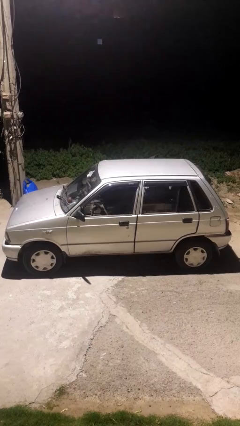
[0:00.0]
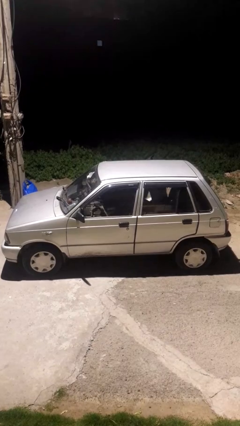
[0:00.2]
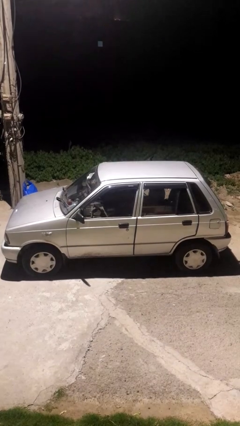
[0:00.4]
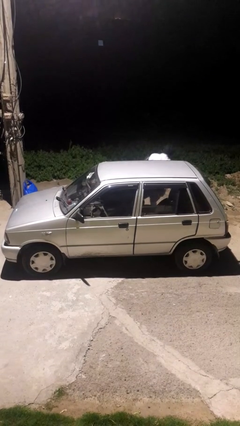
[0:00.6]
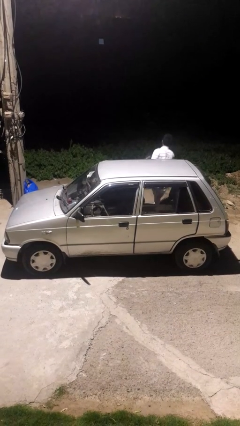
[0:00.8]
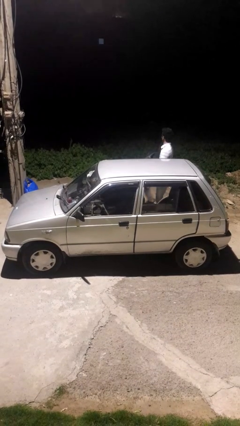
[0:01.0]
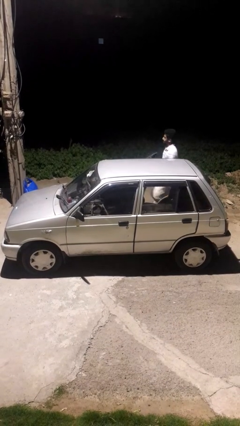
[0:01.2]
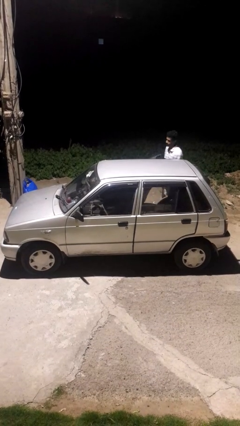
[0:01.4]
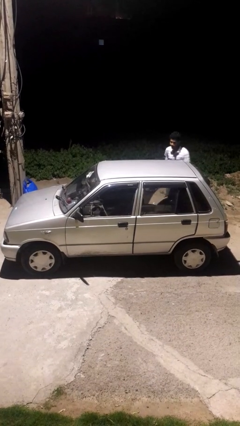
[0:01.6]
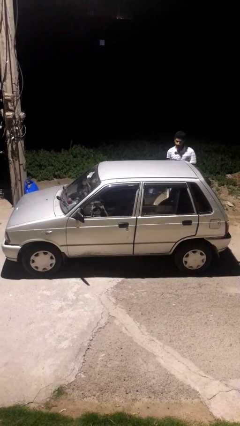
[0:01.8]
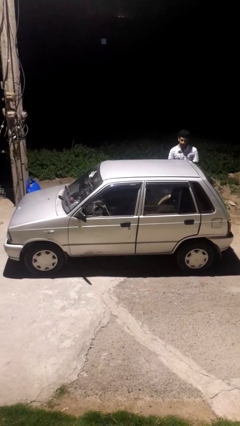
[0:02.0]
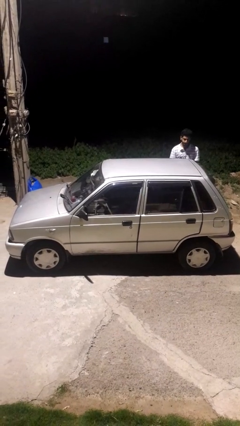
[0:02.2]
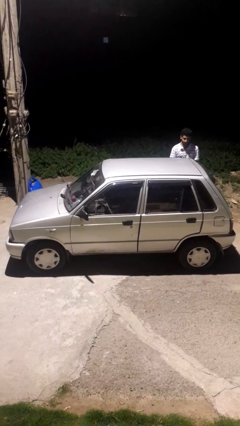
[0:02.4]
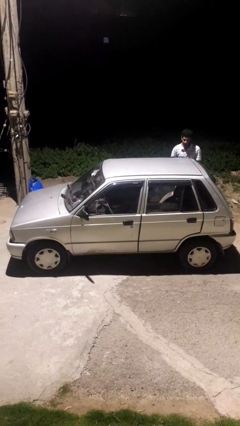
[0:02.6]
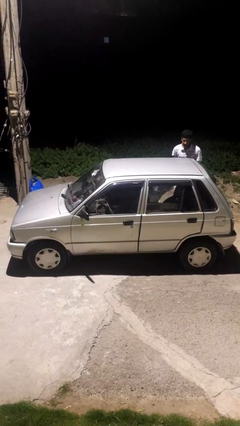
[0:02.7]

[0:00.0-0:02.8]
car drops off person

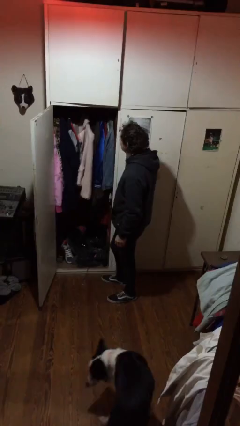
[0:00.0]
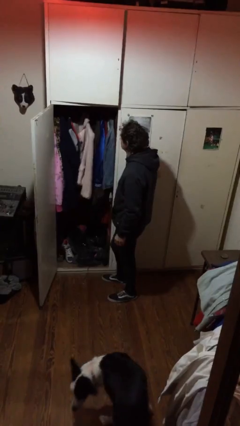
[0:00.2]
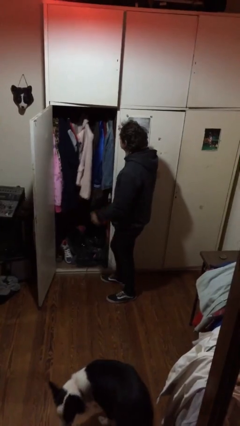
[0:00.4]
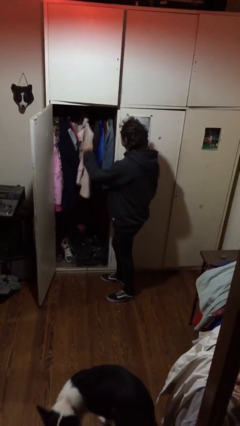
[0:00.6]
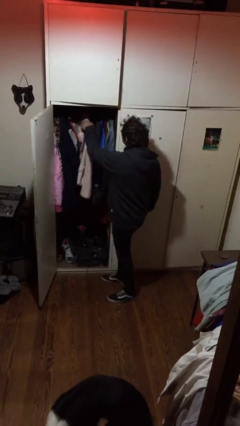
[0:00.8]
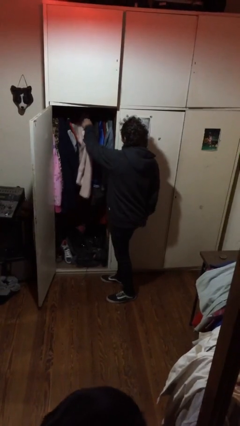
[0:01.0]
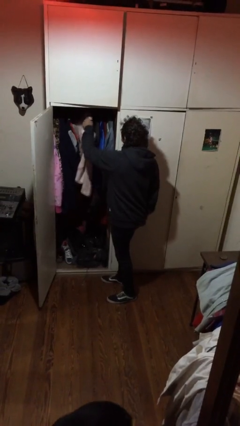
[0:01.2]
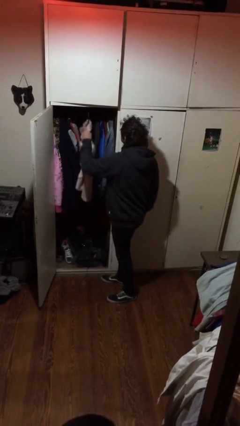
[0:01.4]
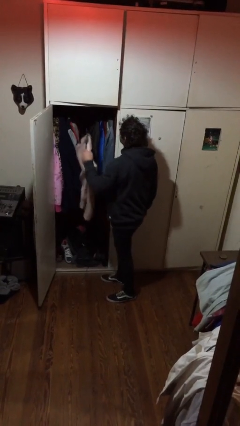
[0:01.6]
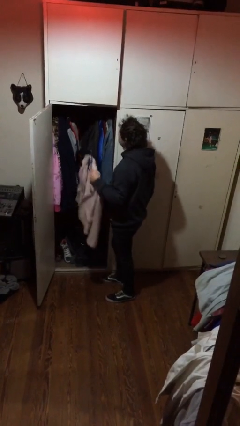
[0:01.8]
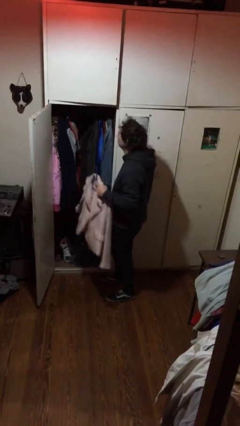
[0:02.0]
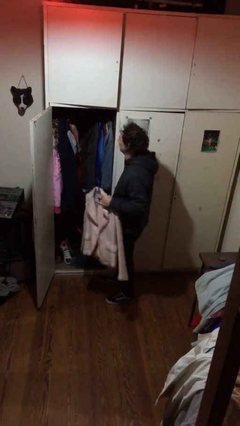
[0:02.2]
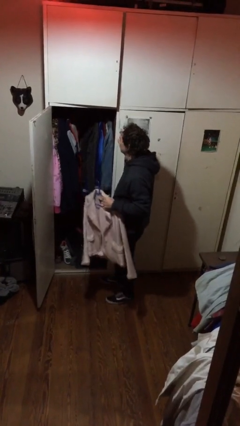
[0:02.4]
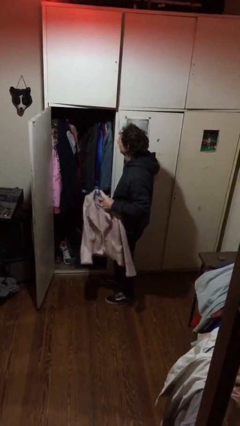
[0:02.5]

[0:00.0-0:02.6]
person takes clothes from closet

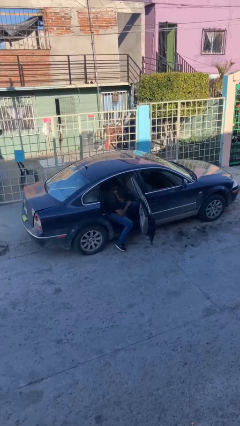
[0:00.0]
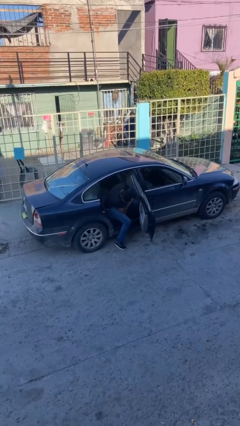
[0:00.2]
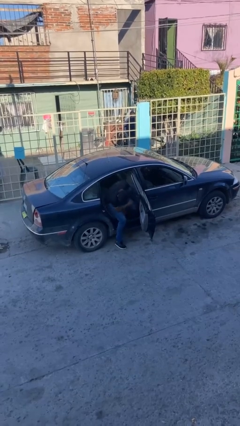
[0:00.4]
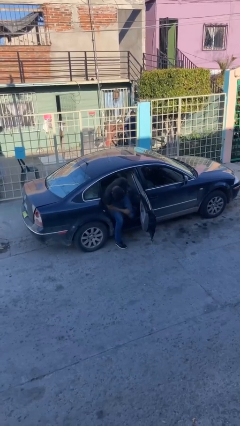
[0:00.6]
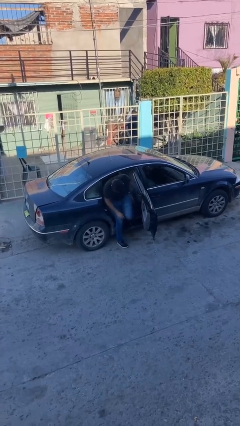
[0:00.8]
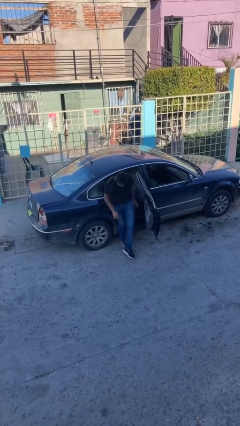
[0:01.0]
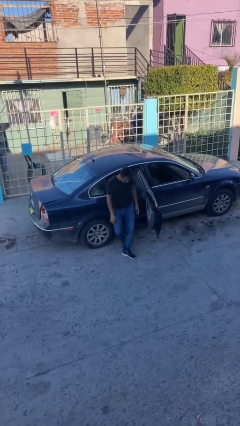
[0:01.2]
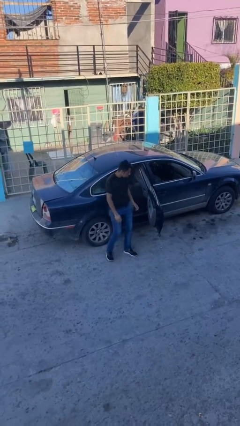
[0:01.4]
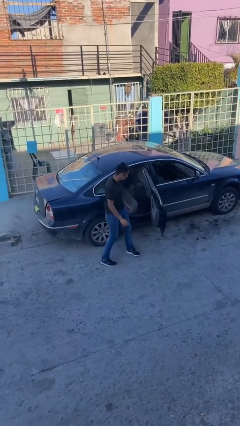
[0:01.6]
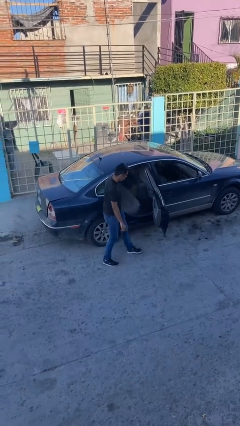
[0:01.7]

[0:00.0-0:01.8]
person exits car

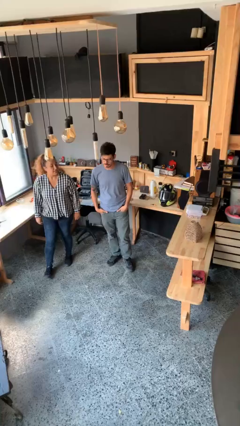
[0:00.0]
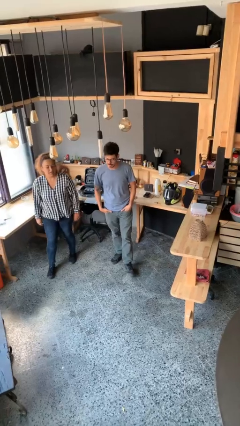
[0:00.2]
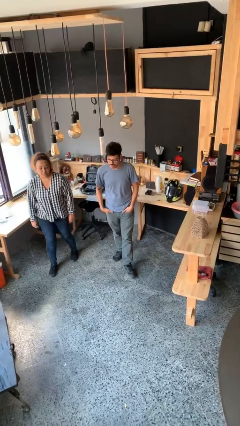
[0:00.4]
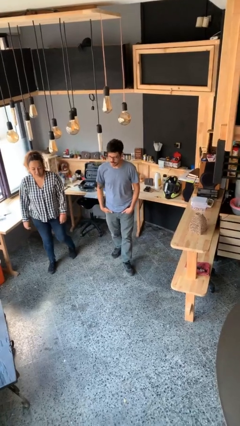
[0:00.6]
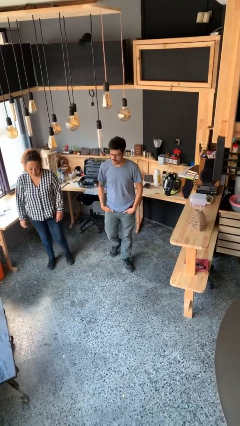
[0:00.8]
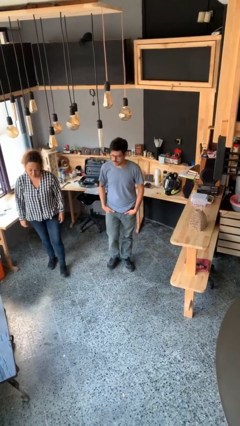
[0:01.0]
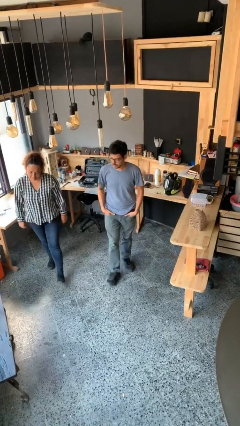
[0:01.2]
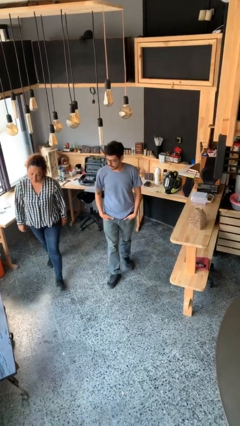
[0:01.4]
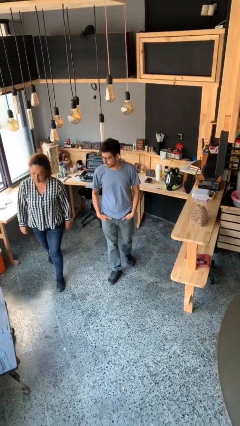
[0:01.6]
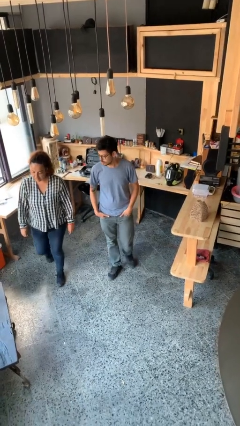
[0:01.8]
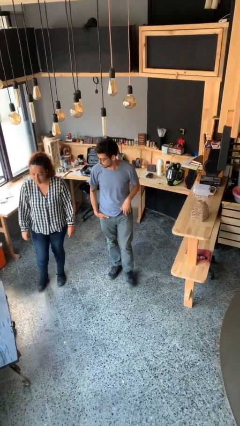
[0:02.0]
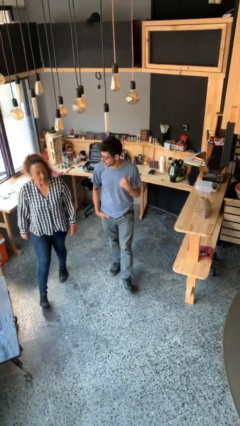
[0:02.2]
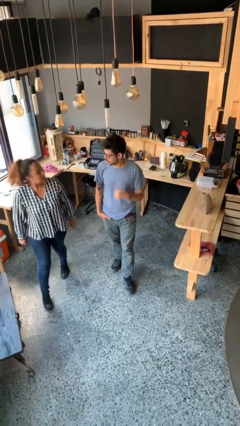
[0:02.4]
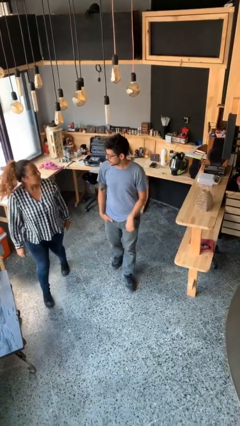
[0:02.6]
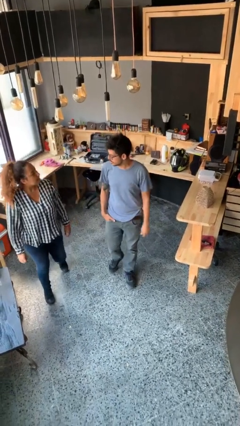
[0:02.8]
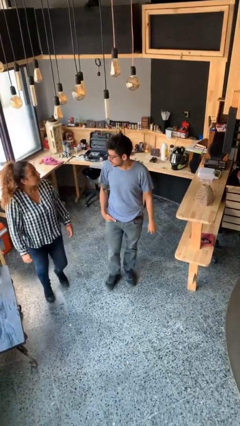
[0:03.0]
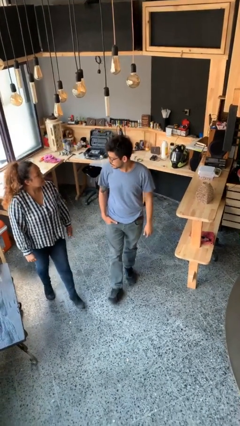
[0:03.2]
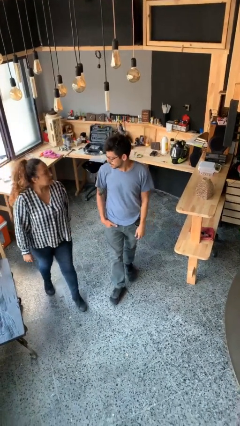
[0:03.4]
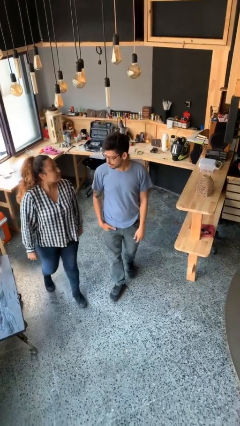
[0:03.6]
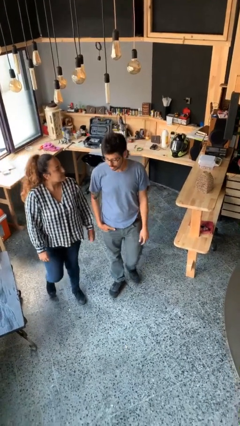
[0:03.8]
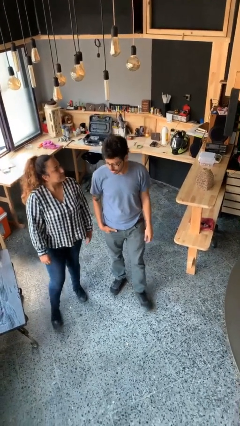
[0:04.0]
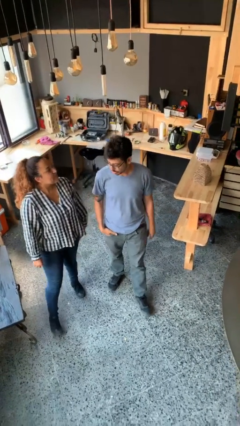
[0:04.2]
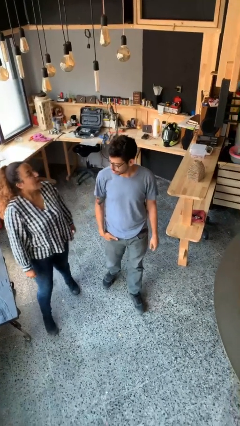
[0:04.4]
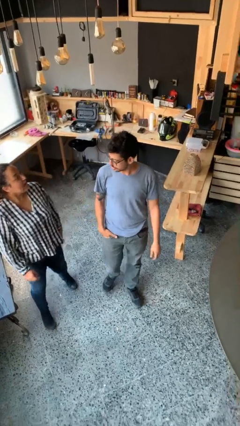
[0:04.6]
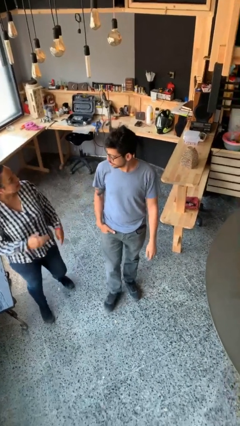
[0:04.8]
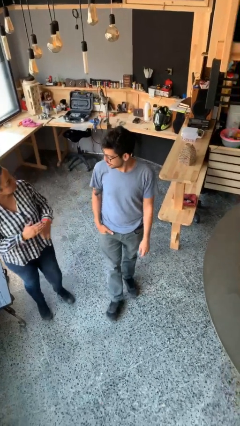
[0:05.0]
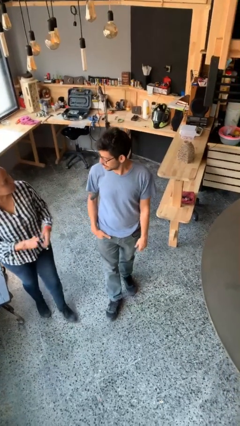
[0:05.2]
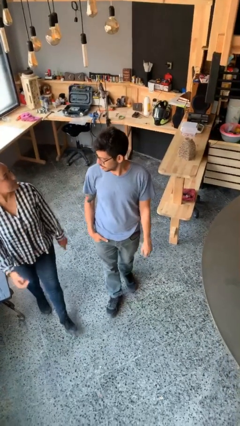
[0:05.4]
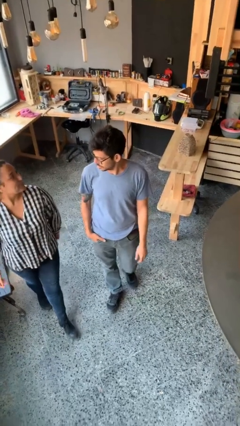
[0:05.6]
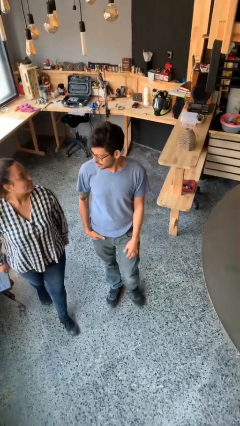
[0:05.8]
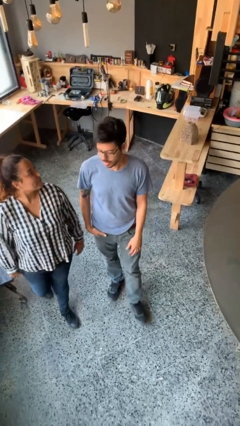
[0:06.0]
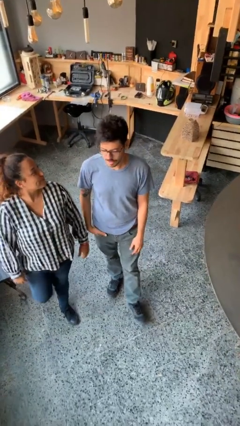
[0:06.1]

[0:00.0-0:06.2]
person talks to person

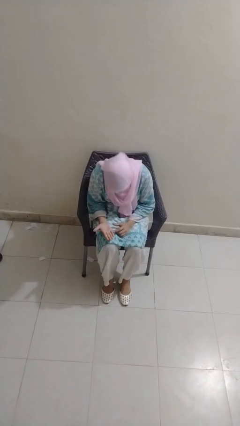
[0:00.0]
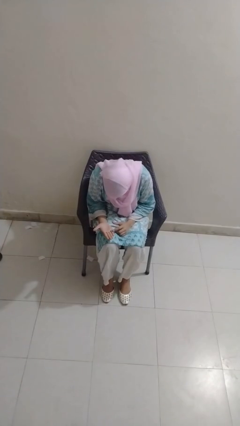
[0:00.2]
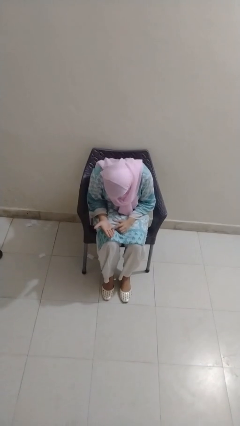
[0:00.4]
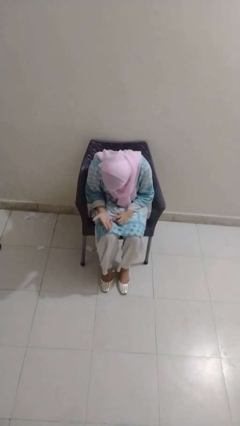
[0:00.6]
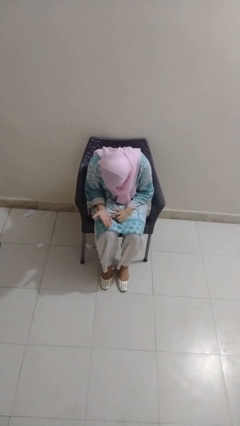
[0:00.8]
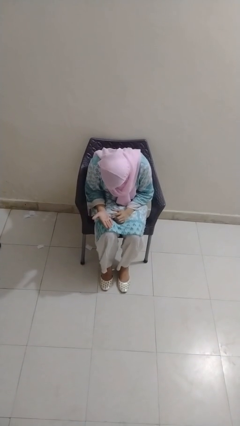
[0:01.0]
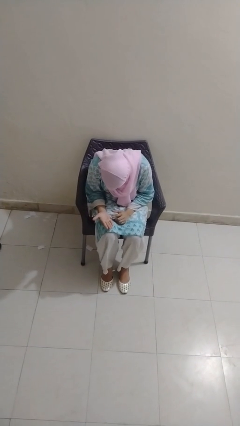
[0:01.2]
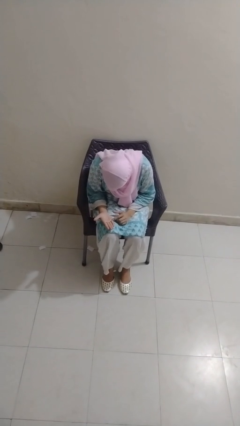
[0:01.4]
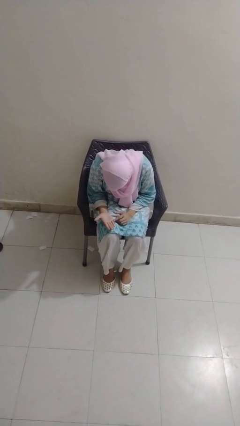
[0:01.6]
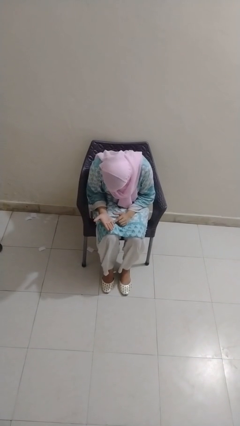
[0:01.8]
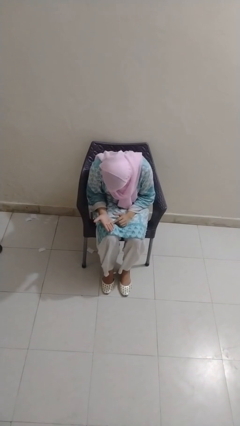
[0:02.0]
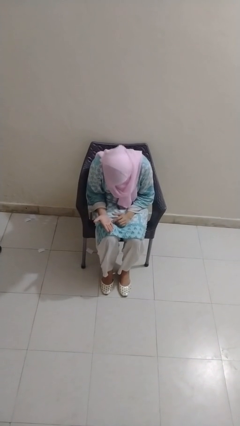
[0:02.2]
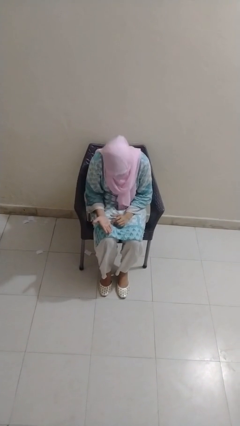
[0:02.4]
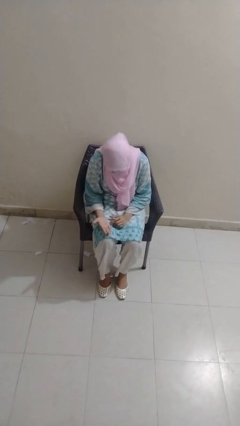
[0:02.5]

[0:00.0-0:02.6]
person looks at hands in lap

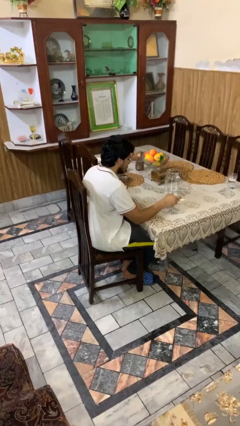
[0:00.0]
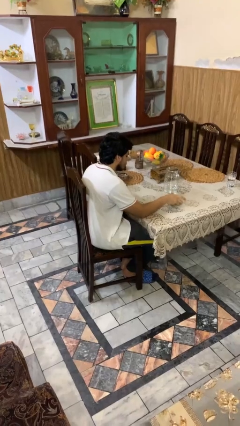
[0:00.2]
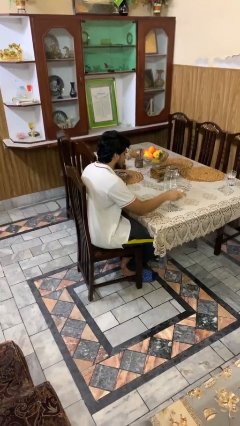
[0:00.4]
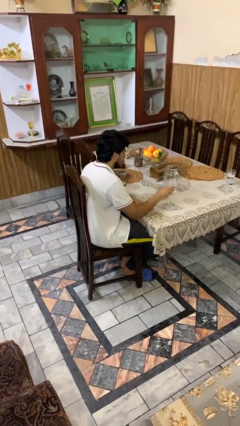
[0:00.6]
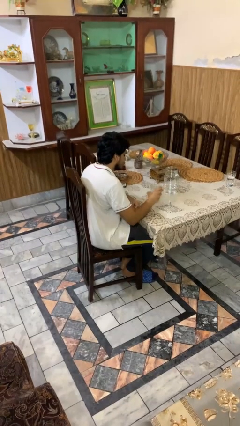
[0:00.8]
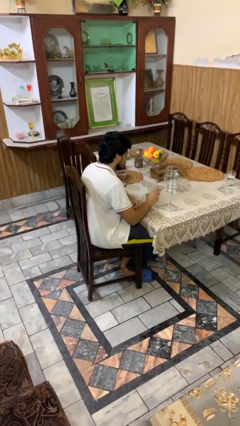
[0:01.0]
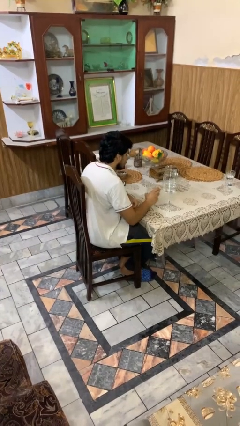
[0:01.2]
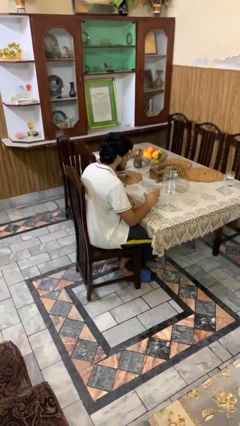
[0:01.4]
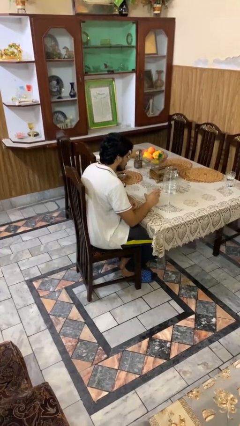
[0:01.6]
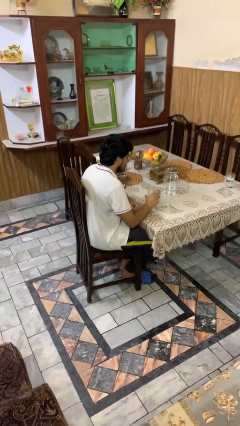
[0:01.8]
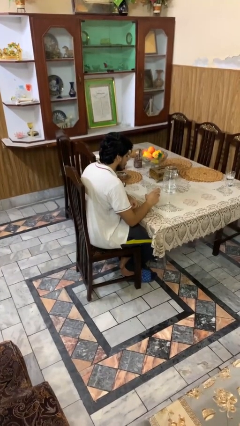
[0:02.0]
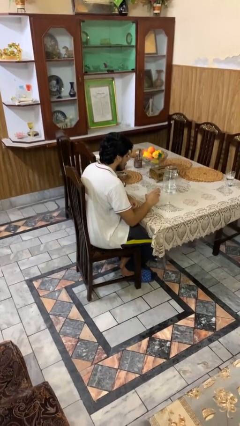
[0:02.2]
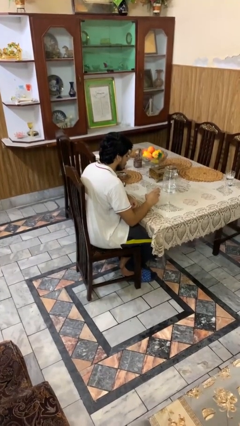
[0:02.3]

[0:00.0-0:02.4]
person sets upright glass
